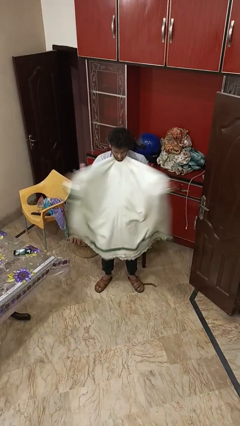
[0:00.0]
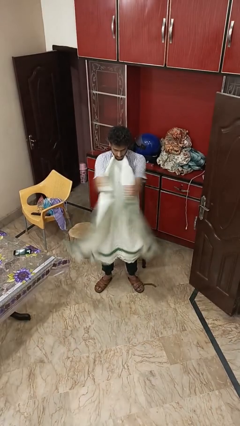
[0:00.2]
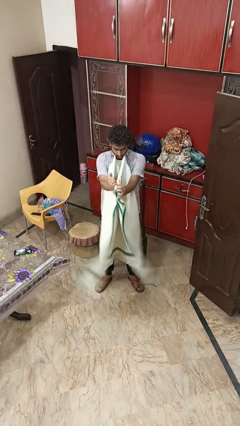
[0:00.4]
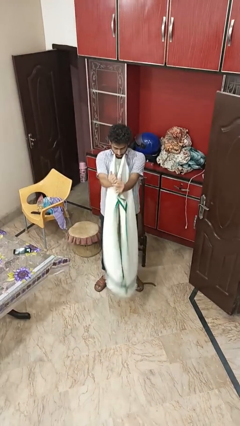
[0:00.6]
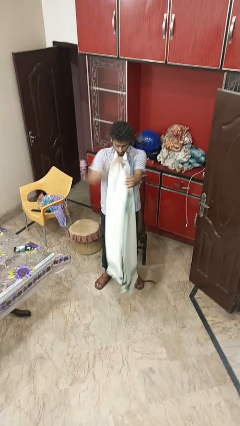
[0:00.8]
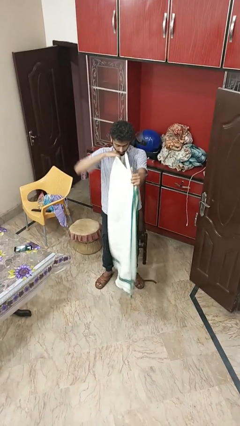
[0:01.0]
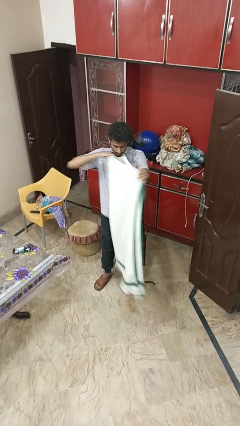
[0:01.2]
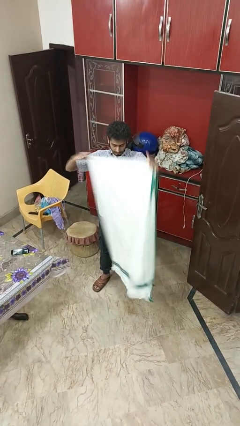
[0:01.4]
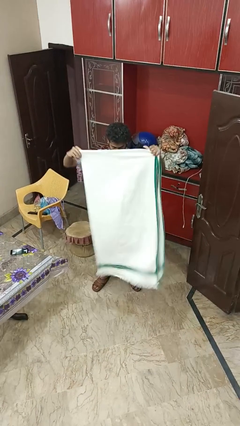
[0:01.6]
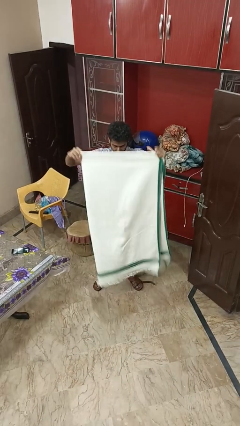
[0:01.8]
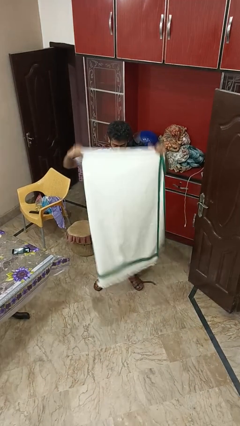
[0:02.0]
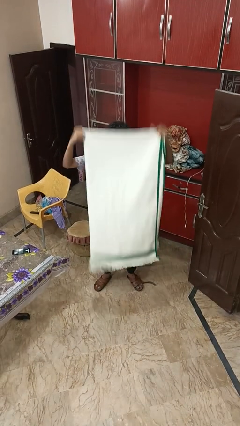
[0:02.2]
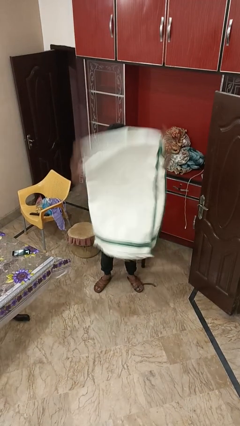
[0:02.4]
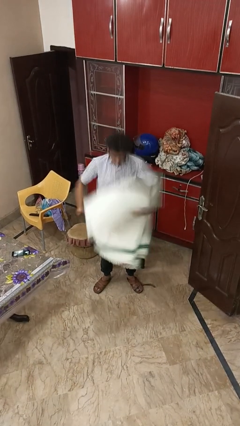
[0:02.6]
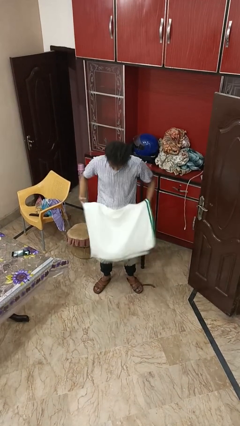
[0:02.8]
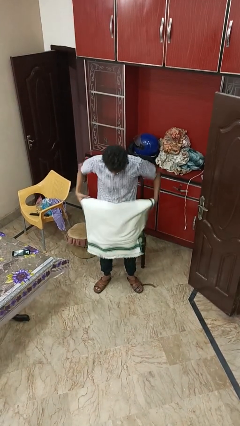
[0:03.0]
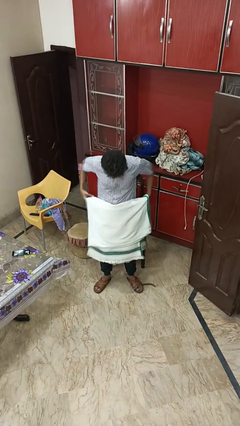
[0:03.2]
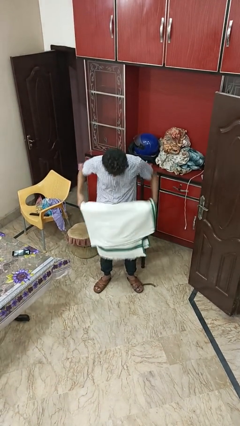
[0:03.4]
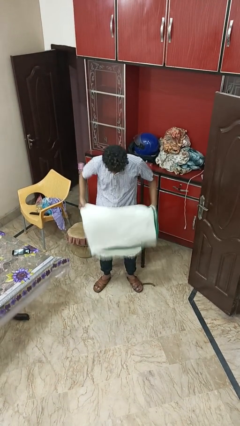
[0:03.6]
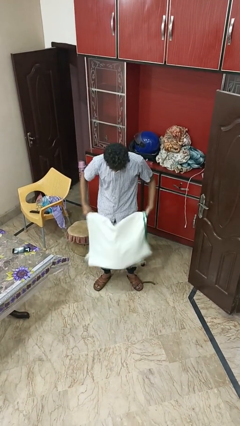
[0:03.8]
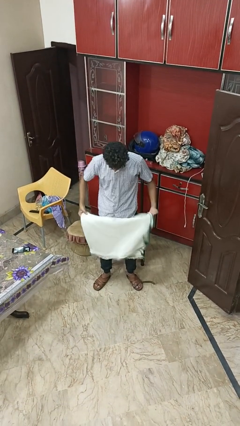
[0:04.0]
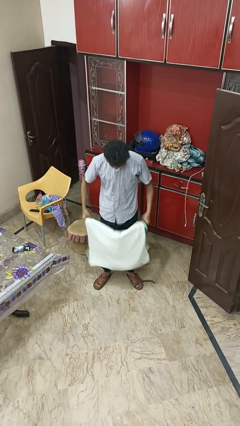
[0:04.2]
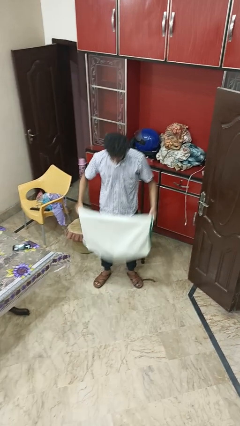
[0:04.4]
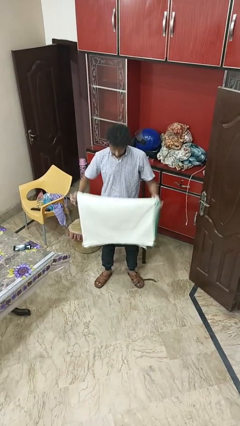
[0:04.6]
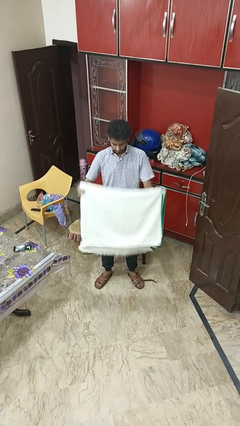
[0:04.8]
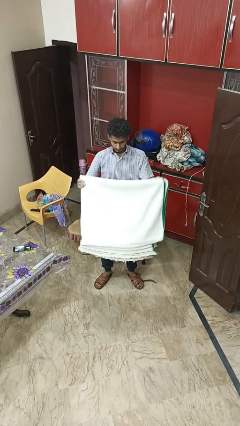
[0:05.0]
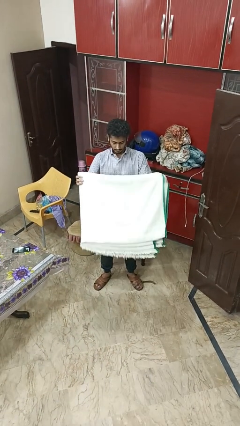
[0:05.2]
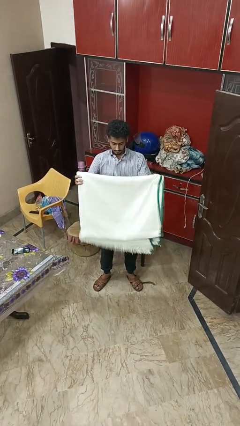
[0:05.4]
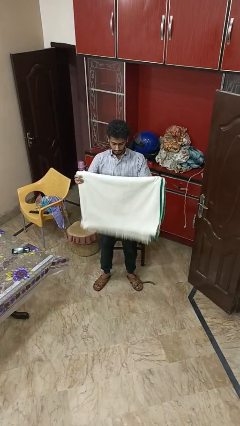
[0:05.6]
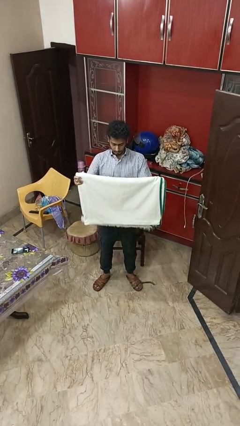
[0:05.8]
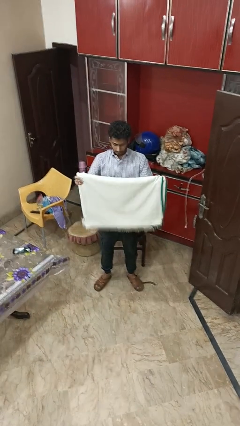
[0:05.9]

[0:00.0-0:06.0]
person folds blanket

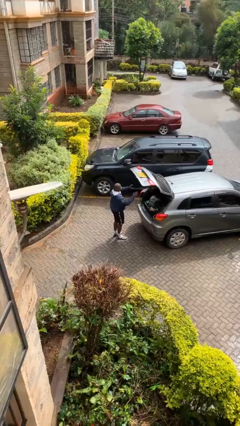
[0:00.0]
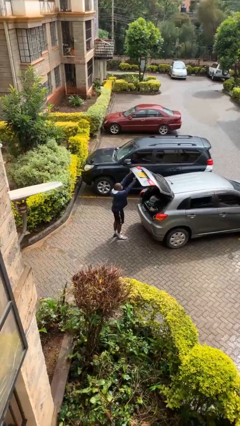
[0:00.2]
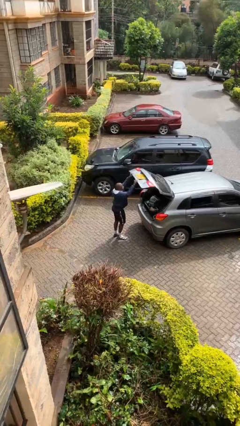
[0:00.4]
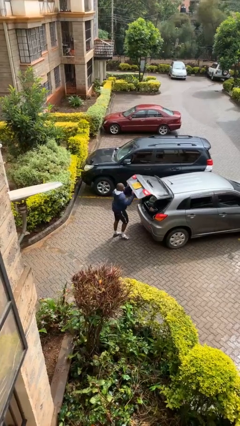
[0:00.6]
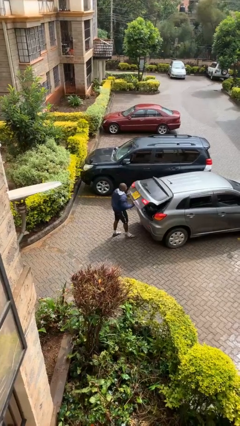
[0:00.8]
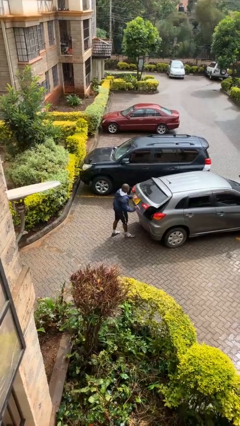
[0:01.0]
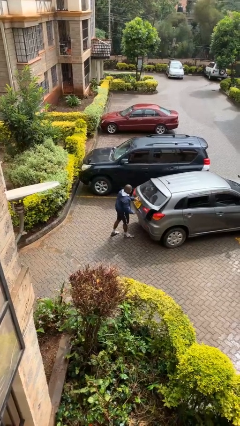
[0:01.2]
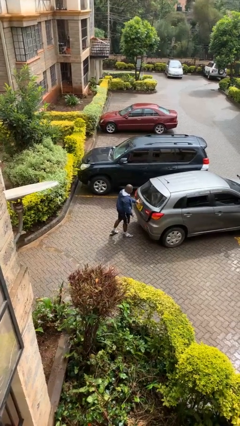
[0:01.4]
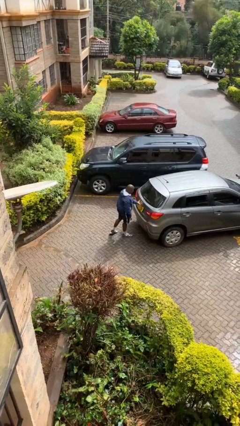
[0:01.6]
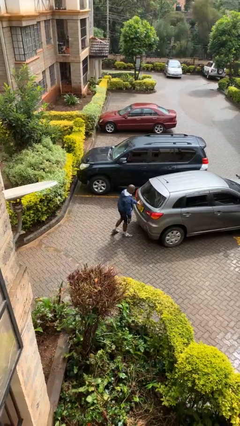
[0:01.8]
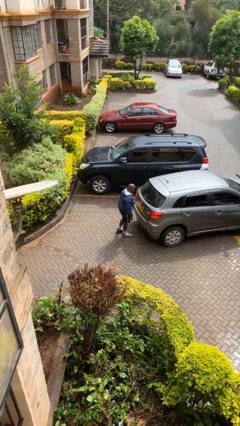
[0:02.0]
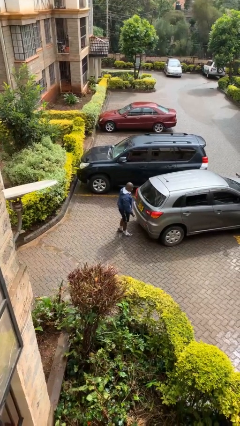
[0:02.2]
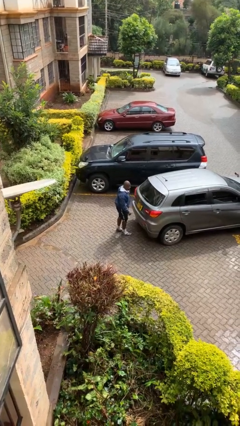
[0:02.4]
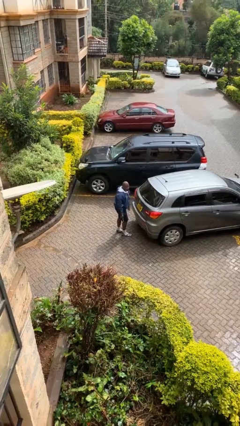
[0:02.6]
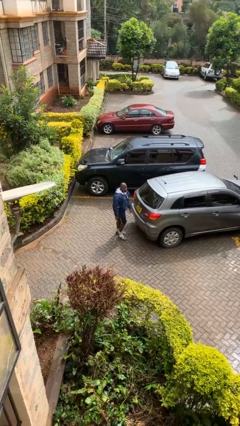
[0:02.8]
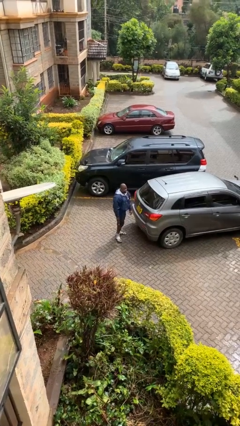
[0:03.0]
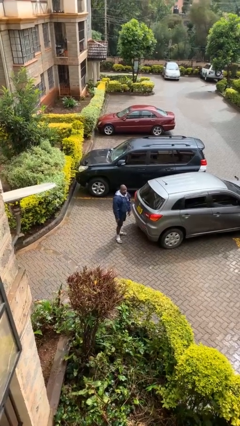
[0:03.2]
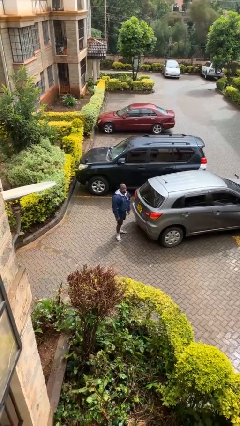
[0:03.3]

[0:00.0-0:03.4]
person closes car trunk

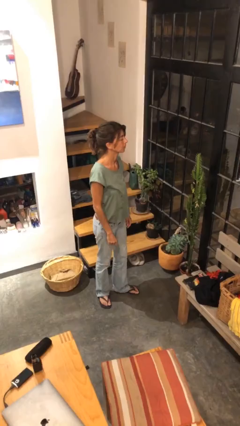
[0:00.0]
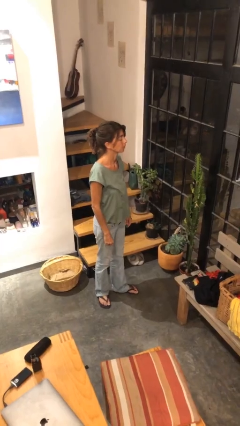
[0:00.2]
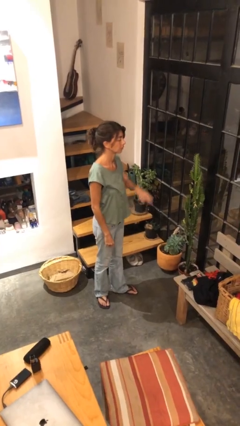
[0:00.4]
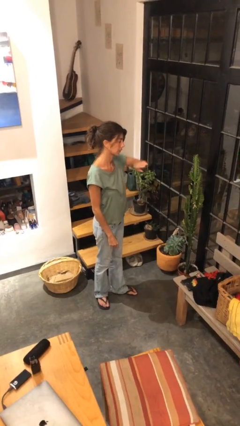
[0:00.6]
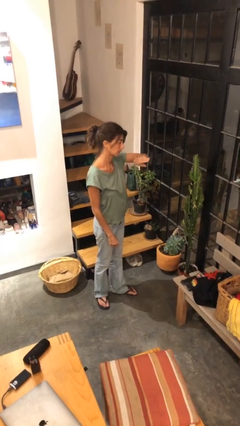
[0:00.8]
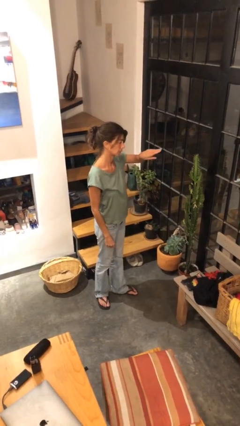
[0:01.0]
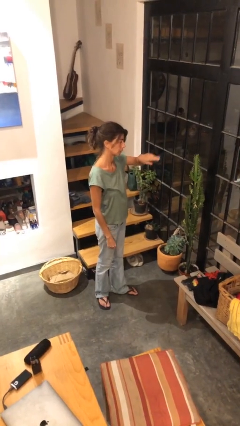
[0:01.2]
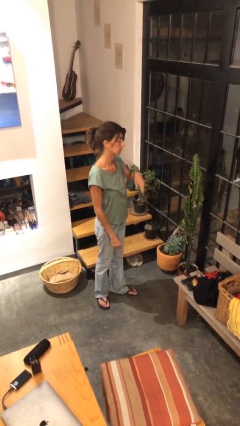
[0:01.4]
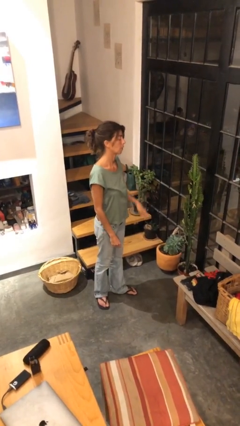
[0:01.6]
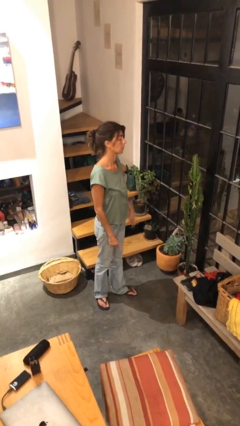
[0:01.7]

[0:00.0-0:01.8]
person gestures swipe left

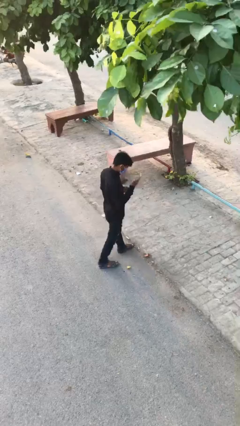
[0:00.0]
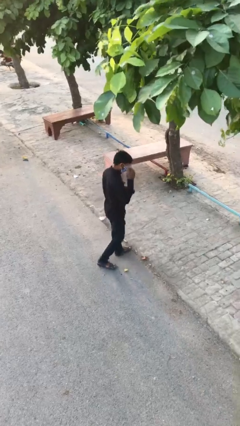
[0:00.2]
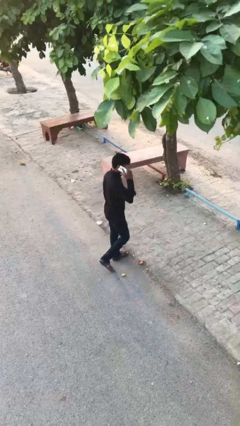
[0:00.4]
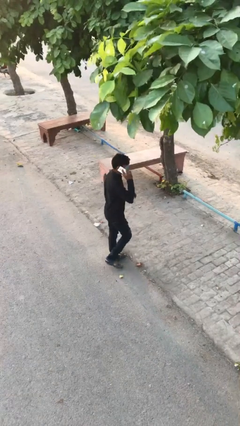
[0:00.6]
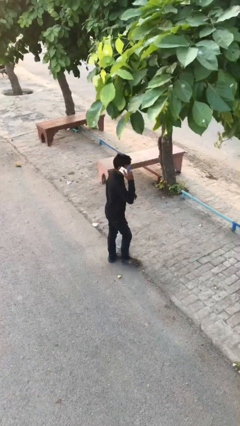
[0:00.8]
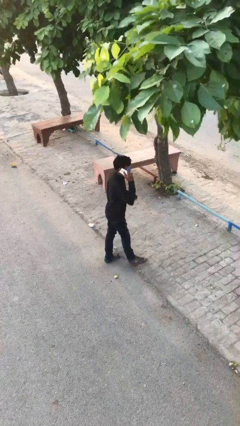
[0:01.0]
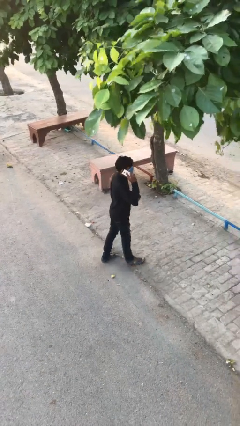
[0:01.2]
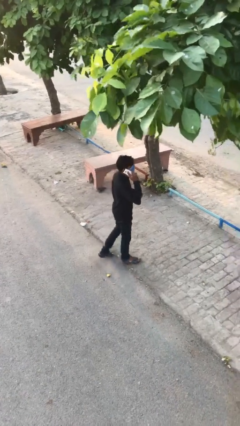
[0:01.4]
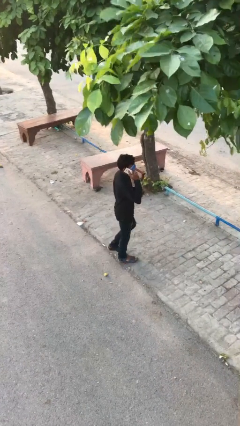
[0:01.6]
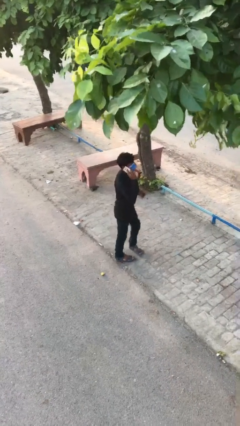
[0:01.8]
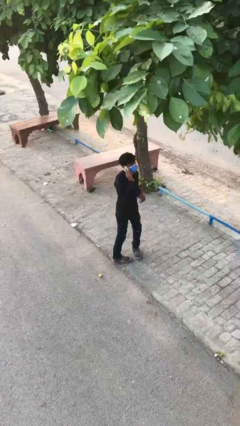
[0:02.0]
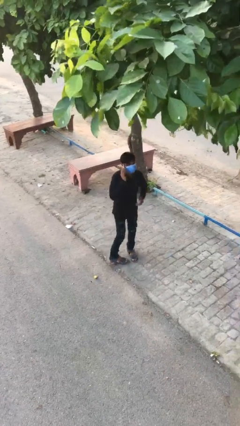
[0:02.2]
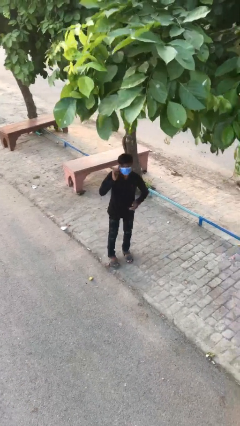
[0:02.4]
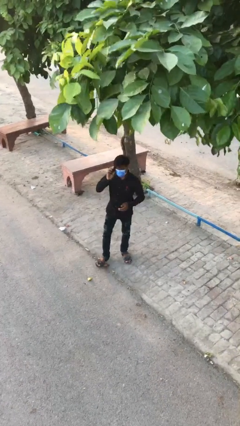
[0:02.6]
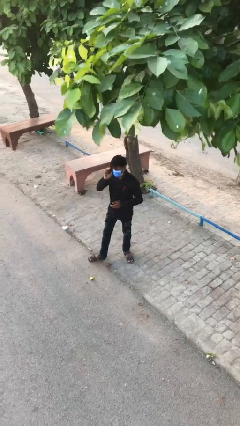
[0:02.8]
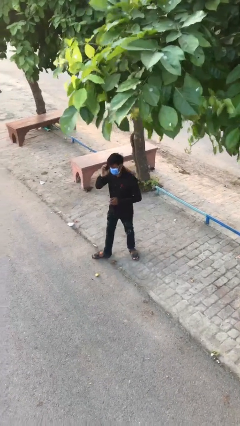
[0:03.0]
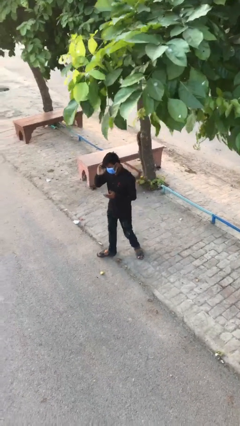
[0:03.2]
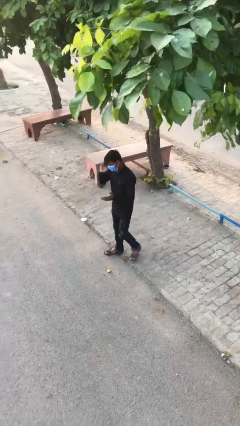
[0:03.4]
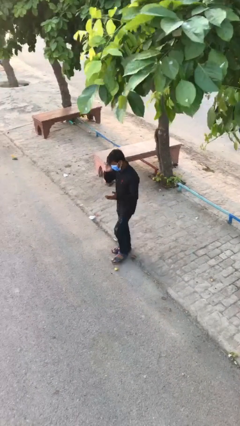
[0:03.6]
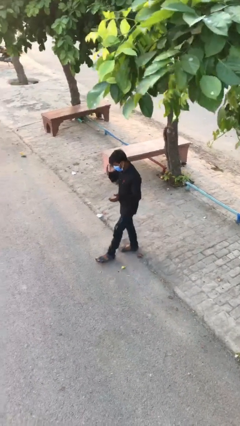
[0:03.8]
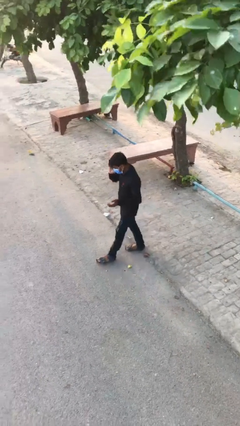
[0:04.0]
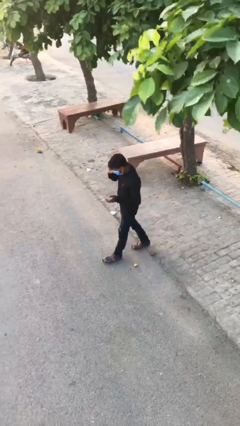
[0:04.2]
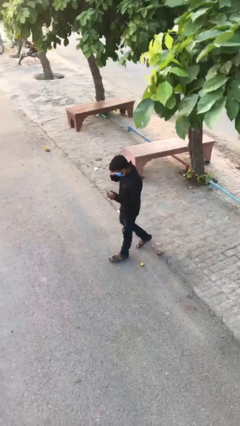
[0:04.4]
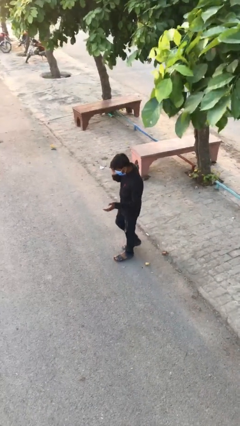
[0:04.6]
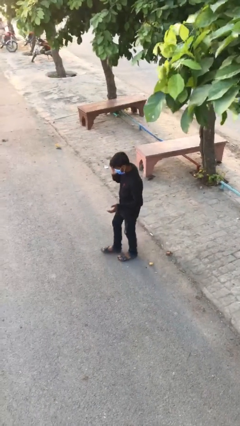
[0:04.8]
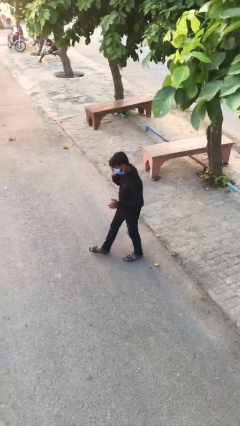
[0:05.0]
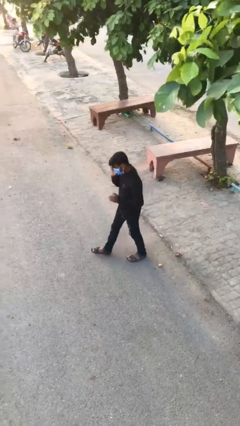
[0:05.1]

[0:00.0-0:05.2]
person talks on phone

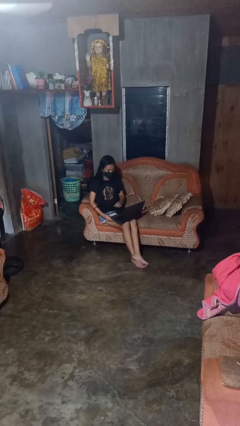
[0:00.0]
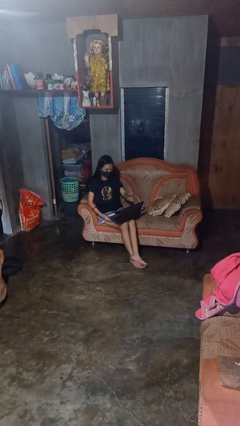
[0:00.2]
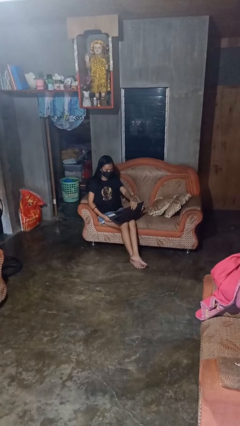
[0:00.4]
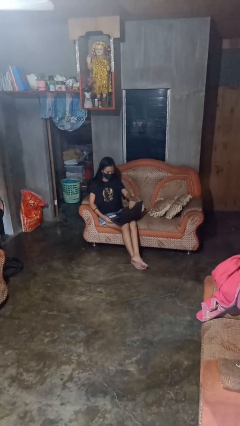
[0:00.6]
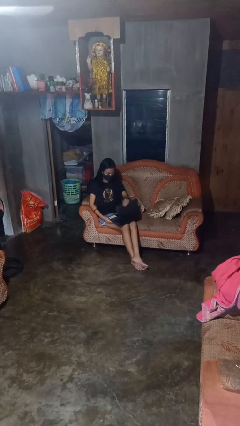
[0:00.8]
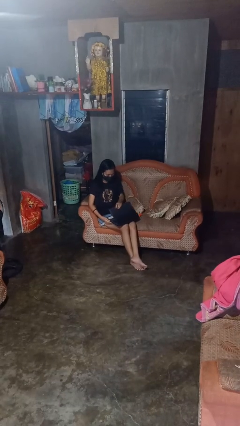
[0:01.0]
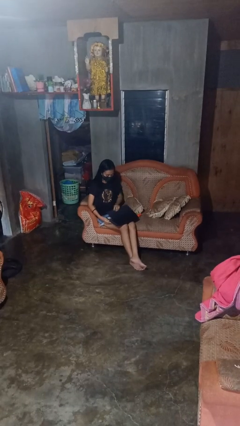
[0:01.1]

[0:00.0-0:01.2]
person closes laptop
